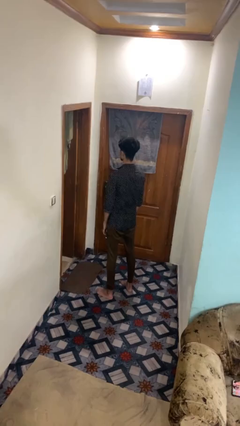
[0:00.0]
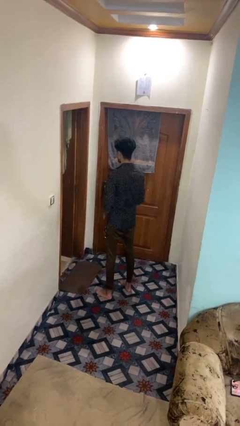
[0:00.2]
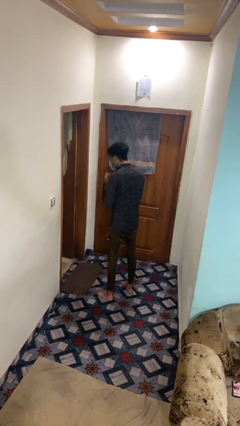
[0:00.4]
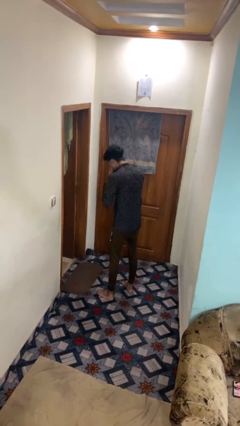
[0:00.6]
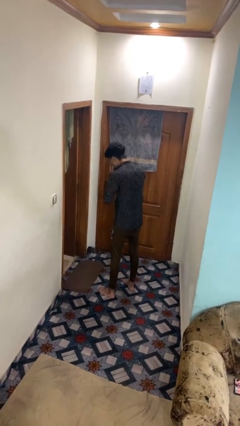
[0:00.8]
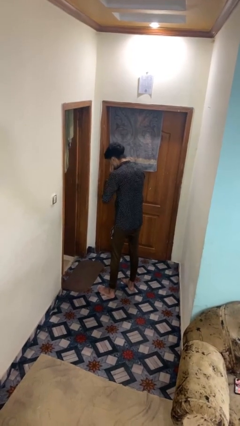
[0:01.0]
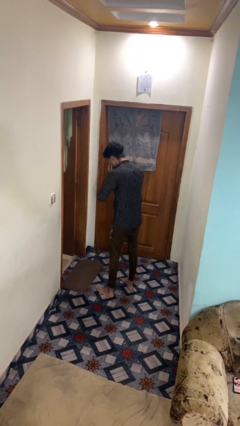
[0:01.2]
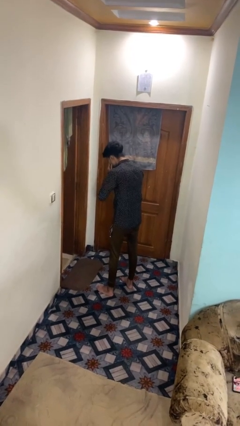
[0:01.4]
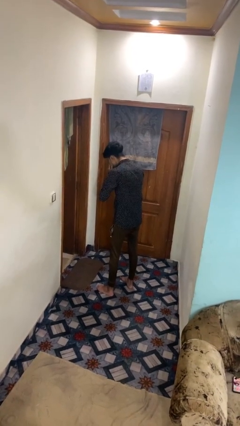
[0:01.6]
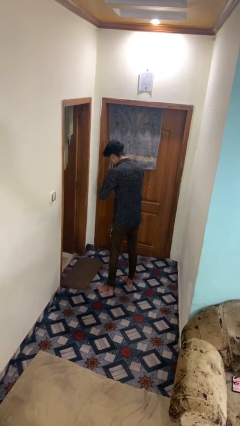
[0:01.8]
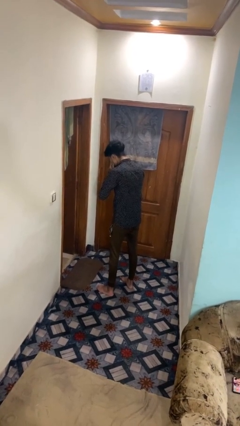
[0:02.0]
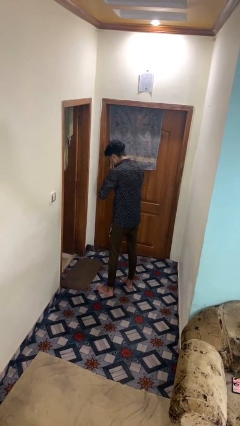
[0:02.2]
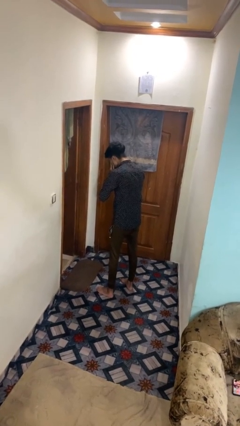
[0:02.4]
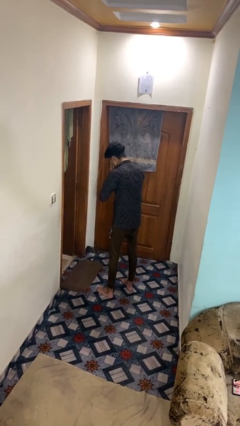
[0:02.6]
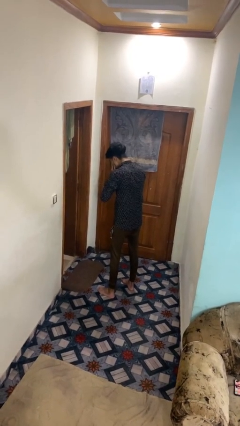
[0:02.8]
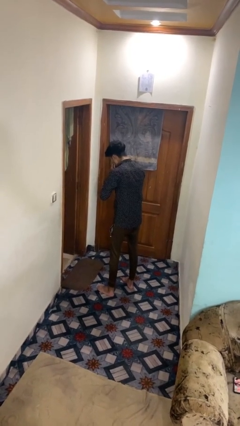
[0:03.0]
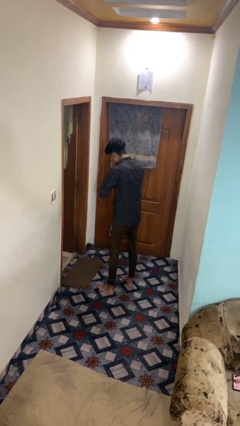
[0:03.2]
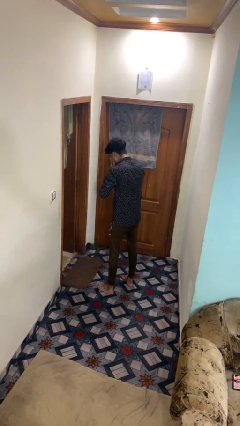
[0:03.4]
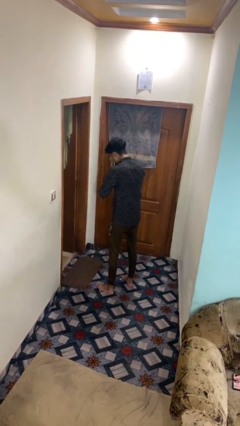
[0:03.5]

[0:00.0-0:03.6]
person sneezes into hand

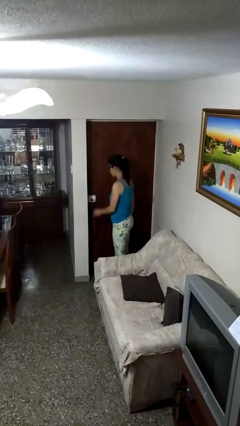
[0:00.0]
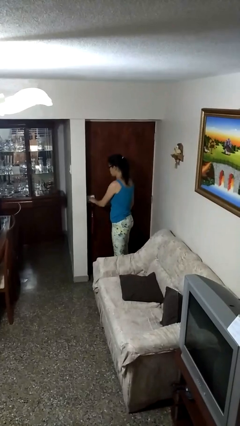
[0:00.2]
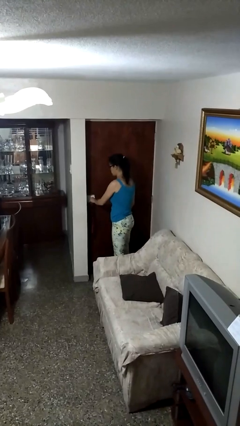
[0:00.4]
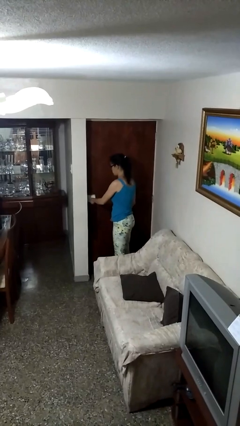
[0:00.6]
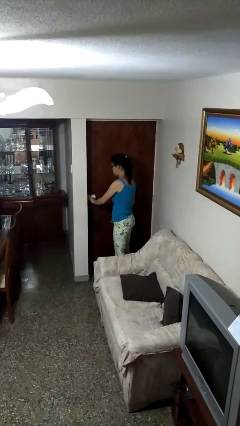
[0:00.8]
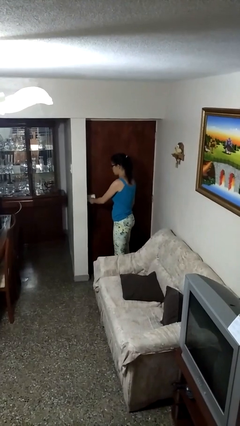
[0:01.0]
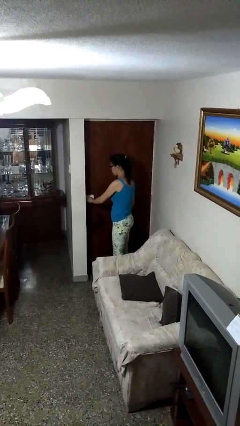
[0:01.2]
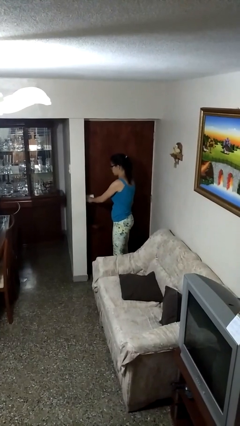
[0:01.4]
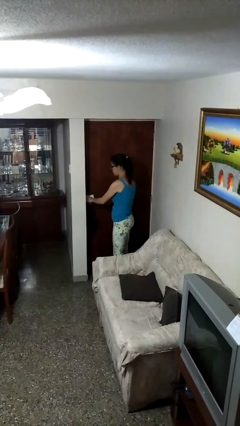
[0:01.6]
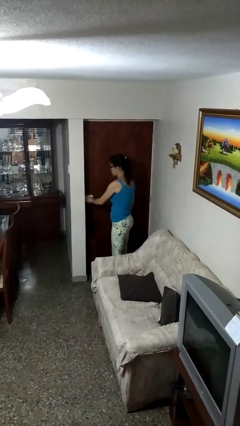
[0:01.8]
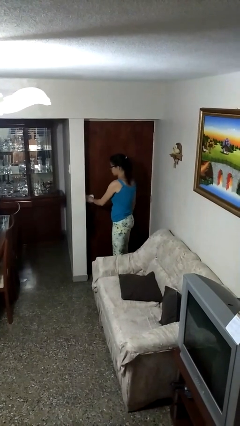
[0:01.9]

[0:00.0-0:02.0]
person locks door with keys

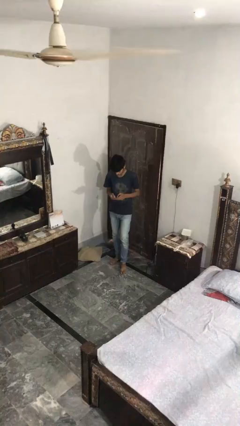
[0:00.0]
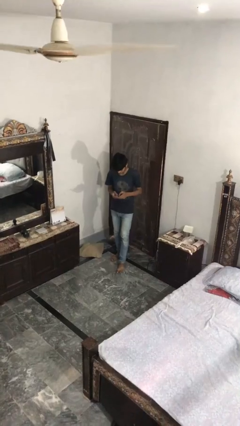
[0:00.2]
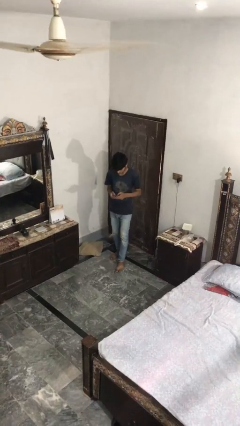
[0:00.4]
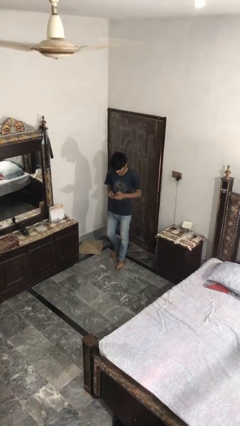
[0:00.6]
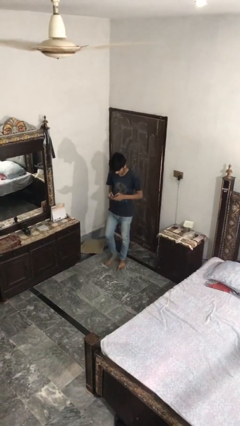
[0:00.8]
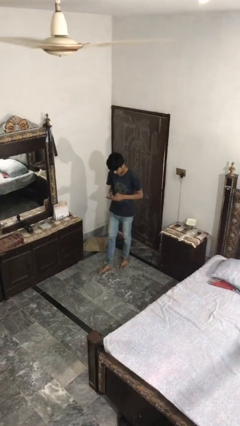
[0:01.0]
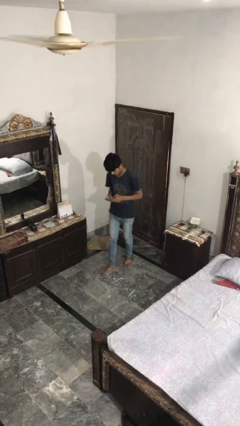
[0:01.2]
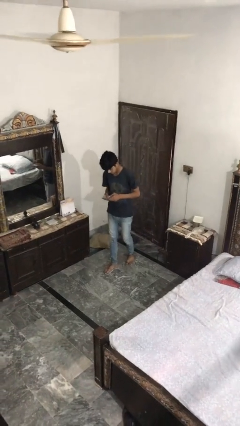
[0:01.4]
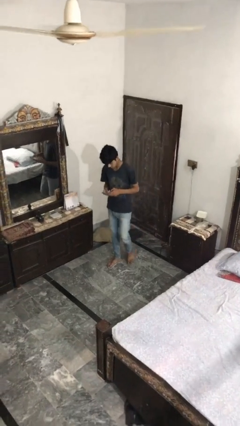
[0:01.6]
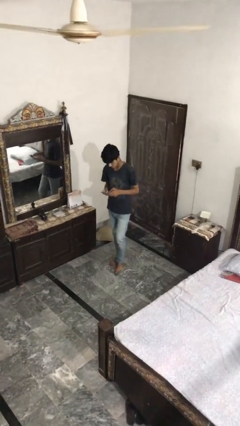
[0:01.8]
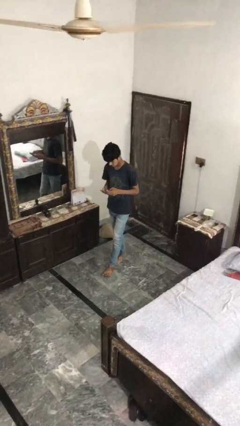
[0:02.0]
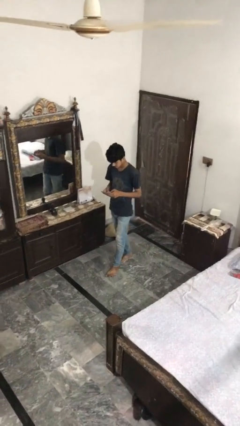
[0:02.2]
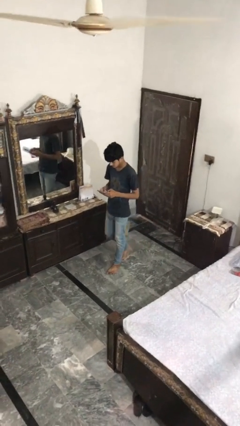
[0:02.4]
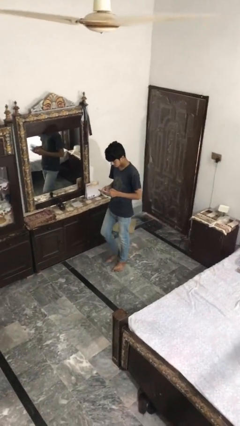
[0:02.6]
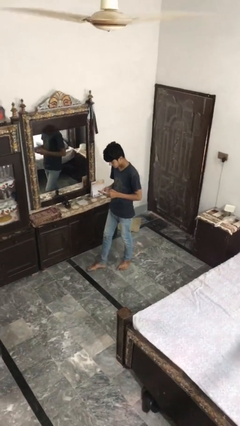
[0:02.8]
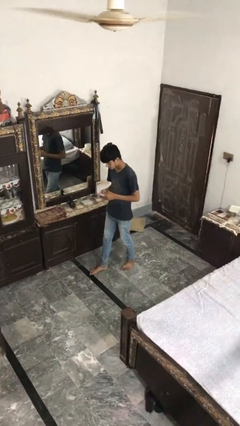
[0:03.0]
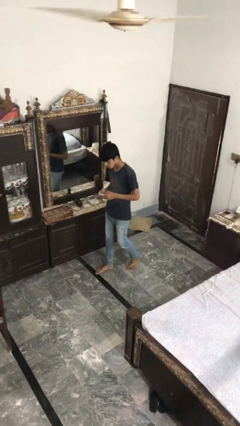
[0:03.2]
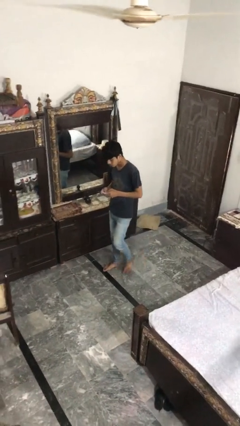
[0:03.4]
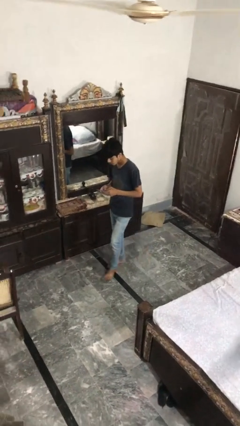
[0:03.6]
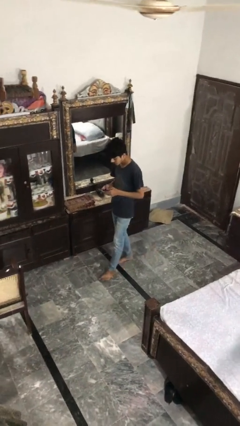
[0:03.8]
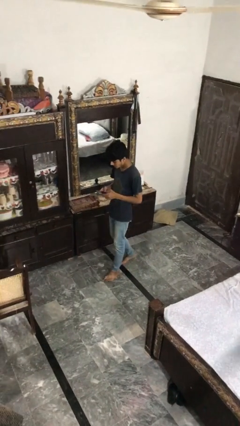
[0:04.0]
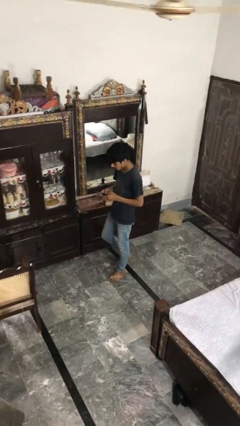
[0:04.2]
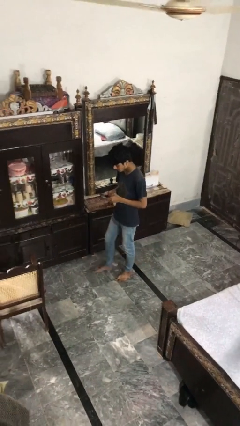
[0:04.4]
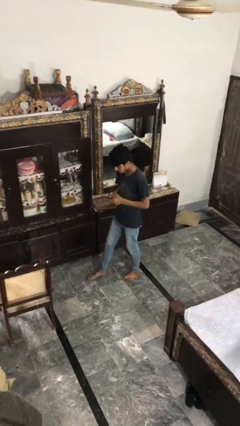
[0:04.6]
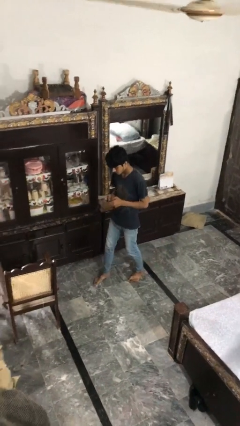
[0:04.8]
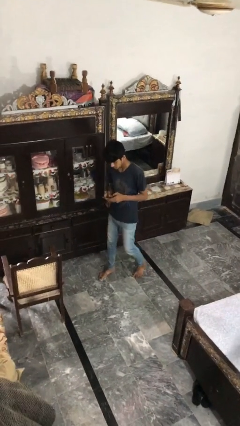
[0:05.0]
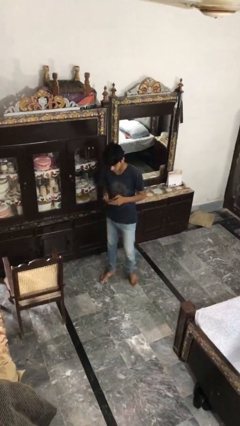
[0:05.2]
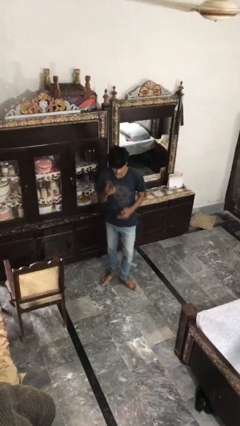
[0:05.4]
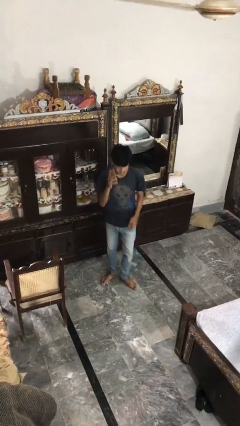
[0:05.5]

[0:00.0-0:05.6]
person texts on phone

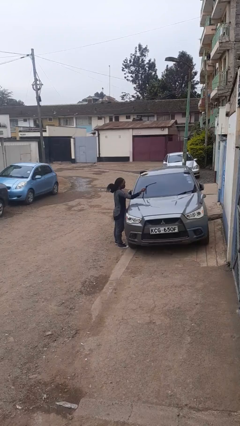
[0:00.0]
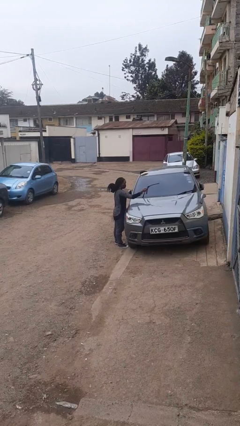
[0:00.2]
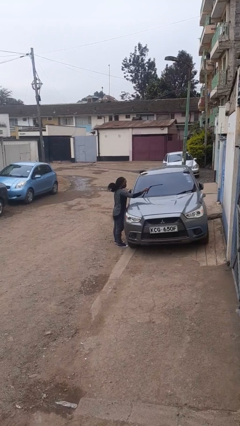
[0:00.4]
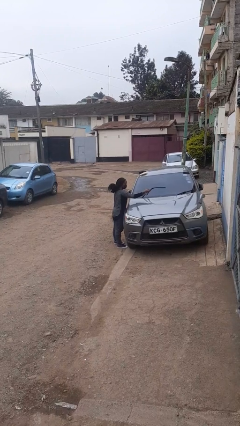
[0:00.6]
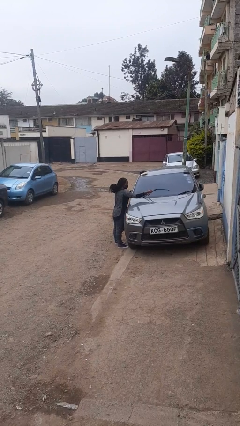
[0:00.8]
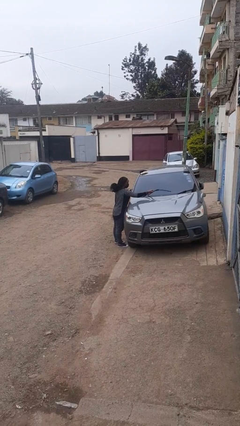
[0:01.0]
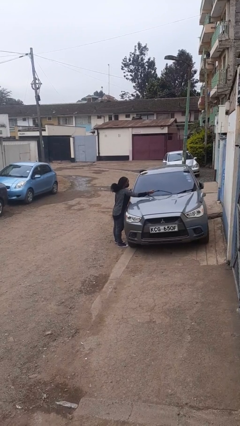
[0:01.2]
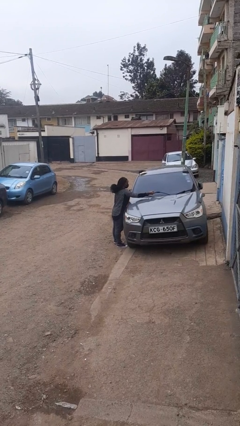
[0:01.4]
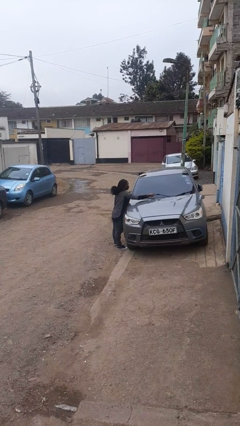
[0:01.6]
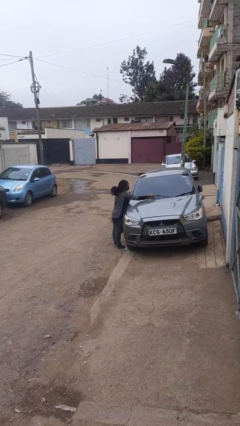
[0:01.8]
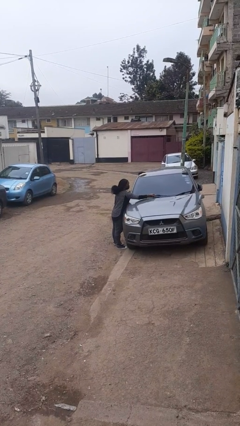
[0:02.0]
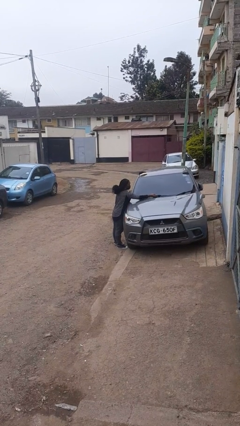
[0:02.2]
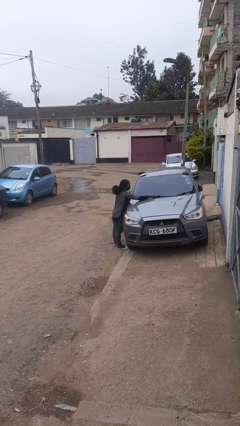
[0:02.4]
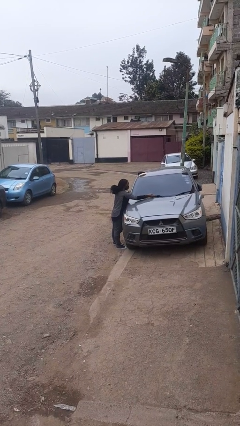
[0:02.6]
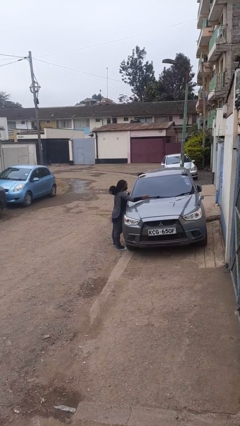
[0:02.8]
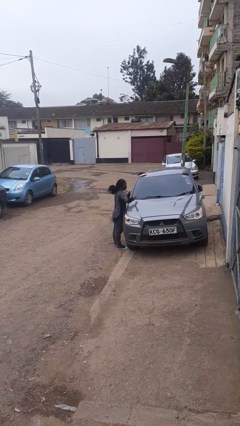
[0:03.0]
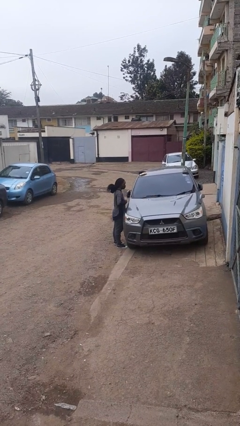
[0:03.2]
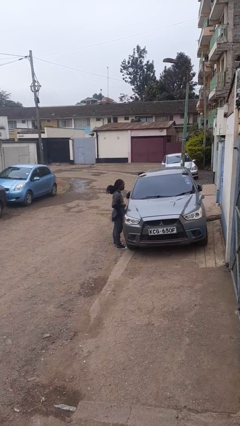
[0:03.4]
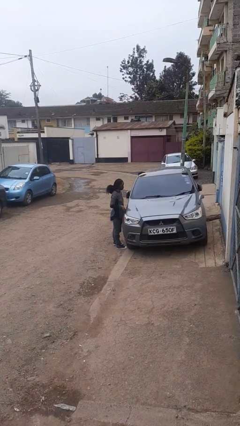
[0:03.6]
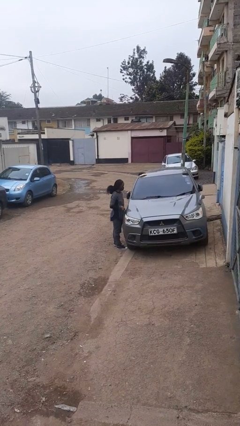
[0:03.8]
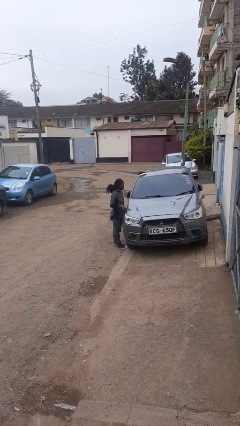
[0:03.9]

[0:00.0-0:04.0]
person flips down car wipers

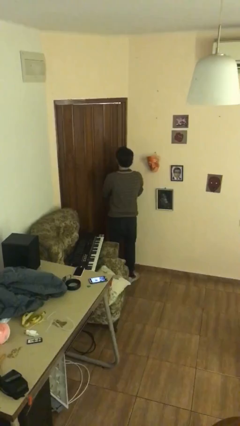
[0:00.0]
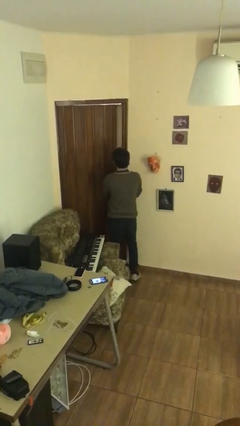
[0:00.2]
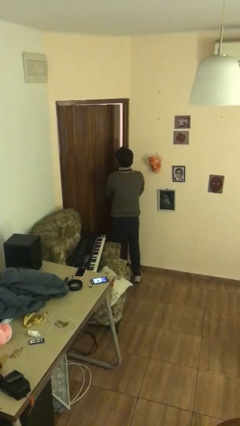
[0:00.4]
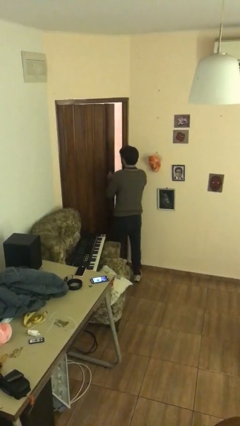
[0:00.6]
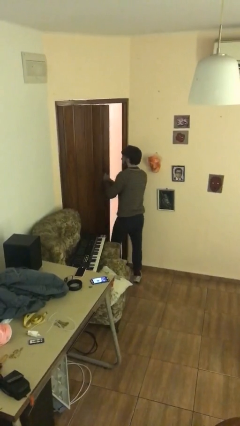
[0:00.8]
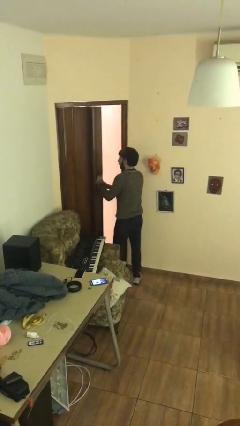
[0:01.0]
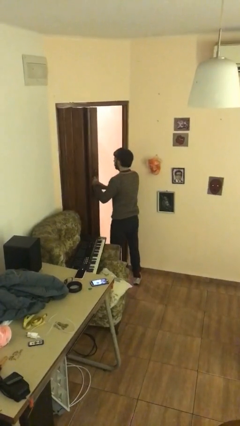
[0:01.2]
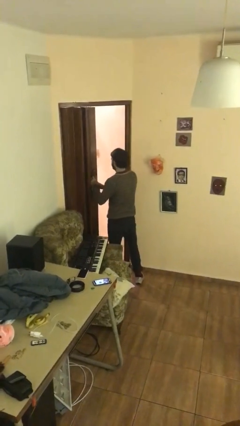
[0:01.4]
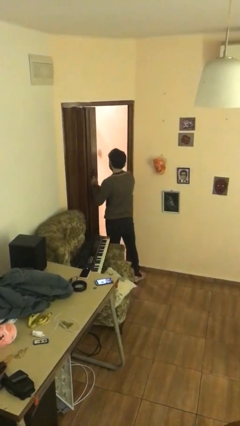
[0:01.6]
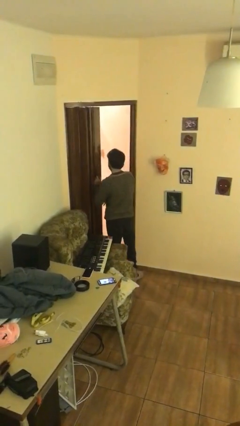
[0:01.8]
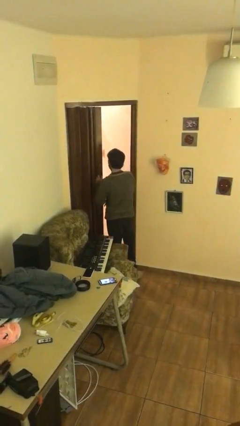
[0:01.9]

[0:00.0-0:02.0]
person opens sliding door

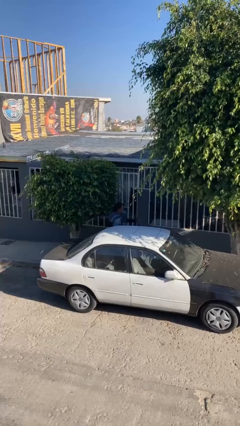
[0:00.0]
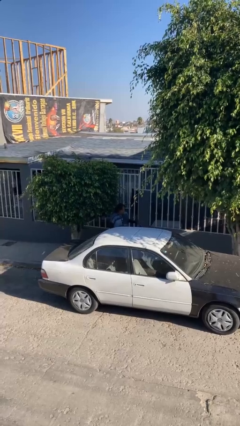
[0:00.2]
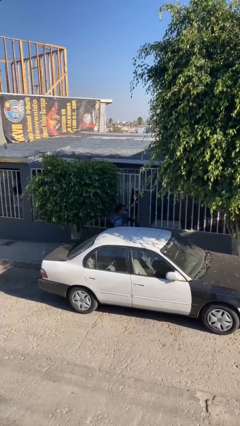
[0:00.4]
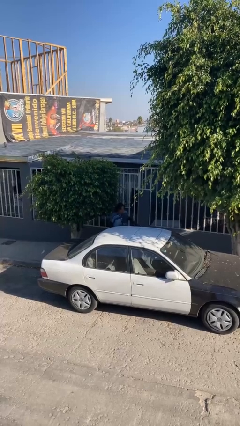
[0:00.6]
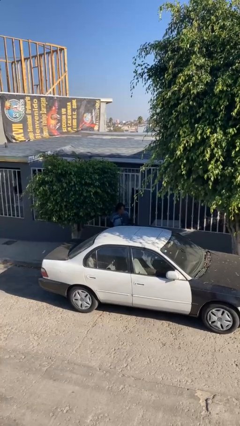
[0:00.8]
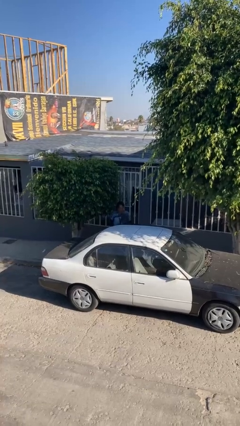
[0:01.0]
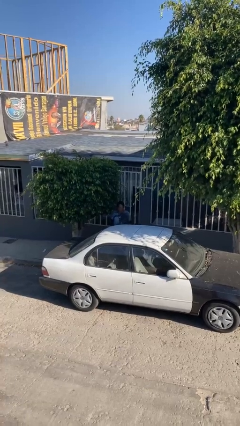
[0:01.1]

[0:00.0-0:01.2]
person closes car door
